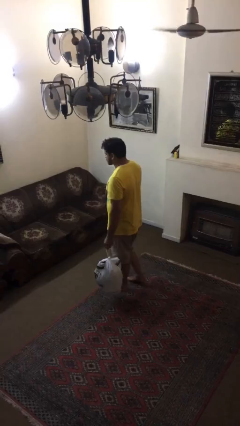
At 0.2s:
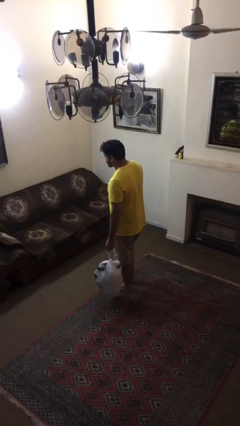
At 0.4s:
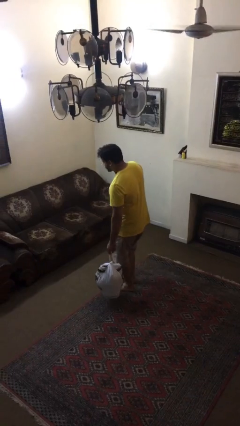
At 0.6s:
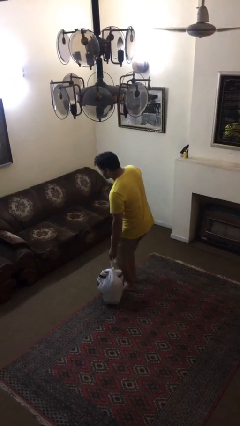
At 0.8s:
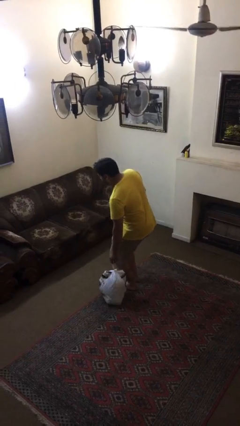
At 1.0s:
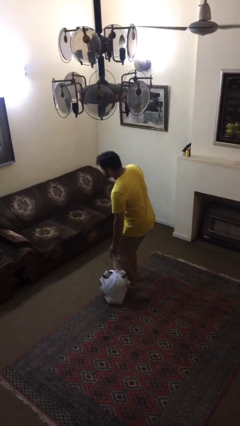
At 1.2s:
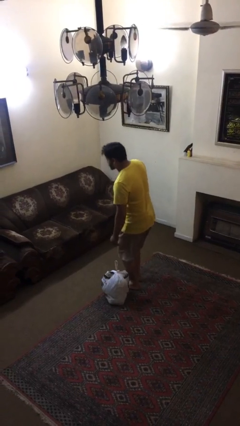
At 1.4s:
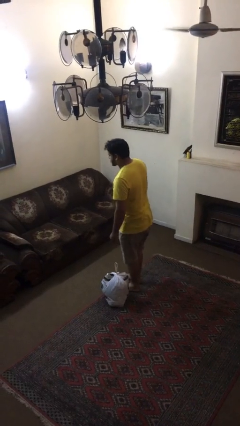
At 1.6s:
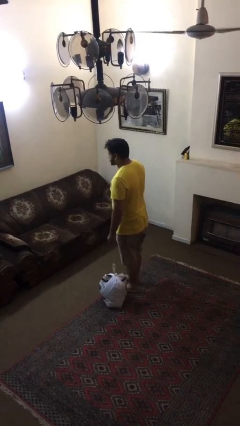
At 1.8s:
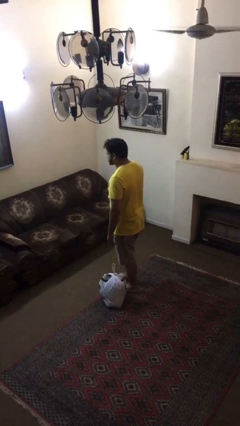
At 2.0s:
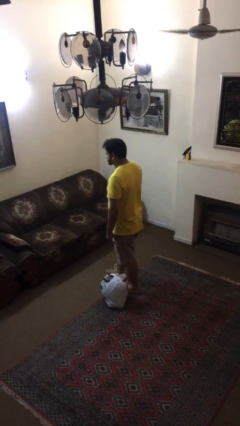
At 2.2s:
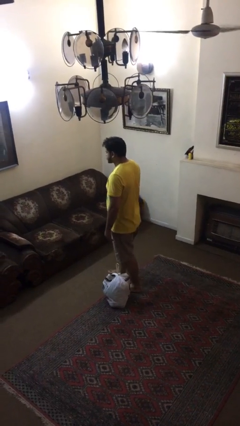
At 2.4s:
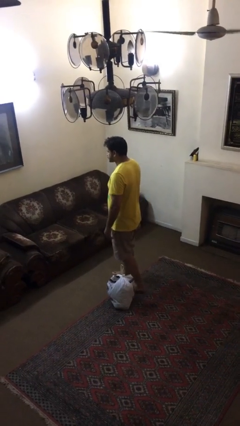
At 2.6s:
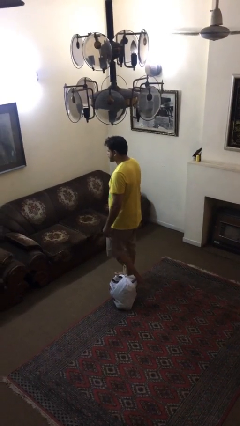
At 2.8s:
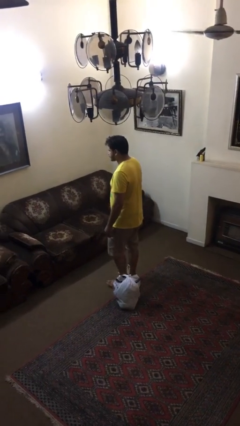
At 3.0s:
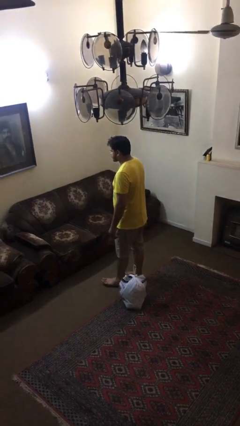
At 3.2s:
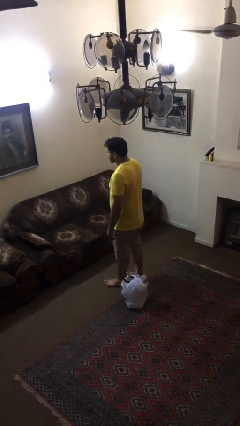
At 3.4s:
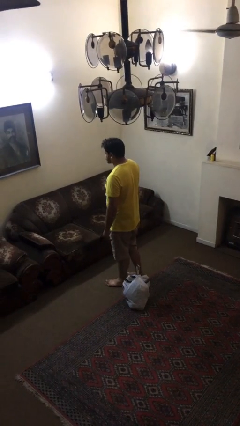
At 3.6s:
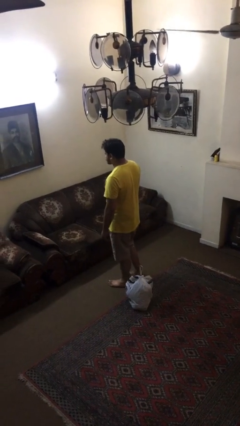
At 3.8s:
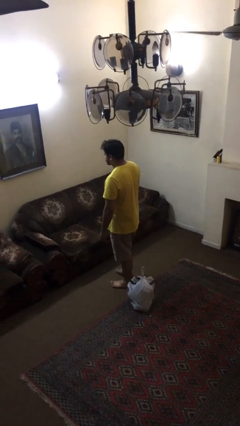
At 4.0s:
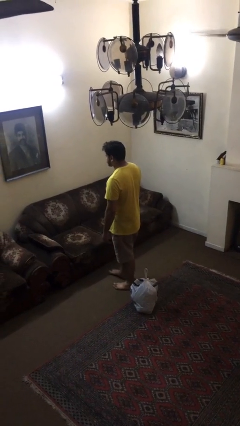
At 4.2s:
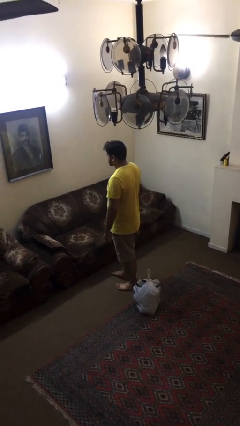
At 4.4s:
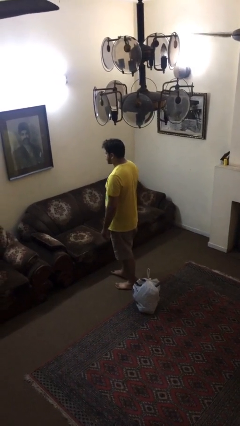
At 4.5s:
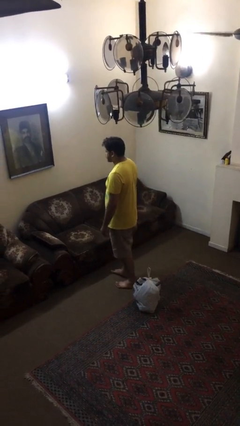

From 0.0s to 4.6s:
person puts down object on floor

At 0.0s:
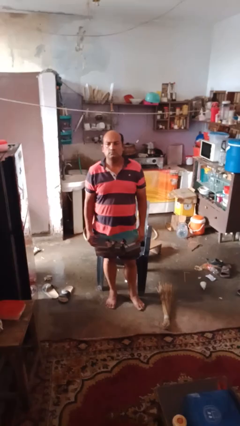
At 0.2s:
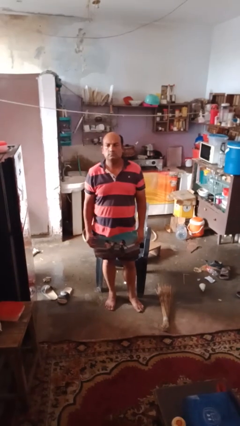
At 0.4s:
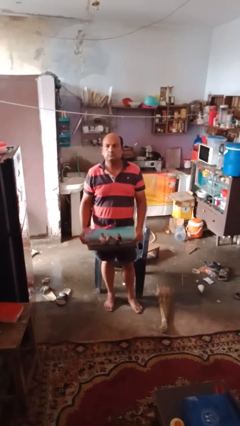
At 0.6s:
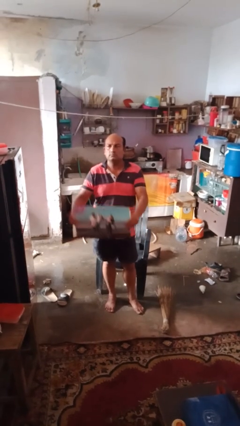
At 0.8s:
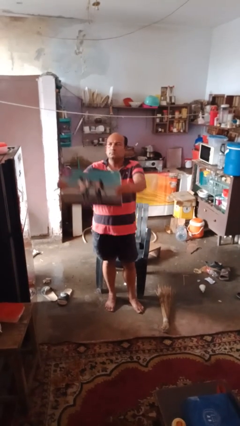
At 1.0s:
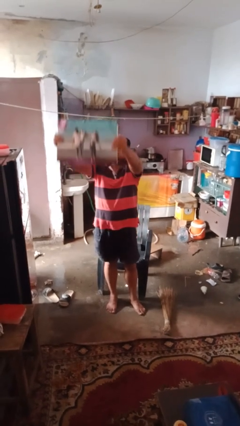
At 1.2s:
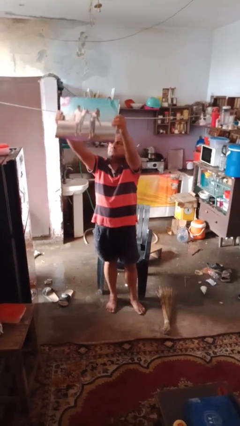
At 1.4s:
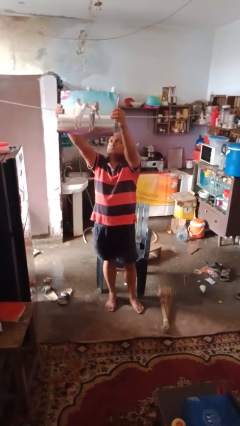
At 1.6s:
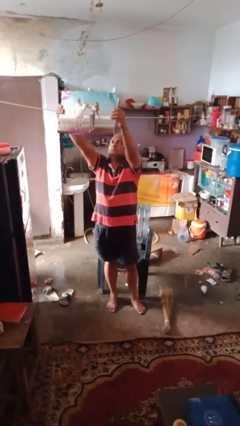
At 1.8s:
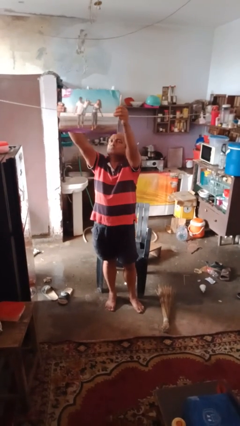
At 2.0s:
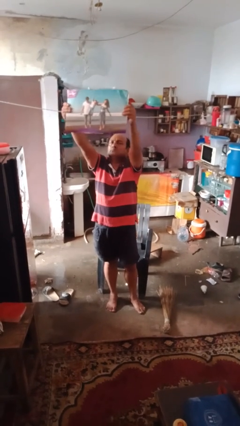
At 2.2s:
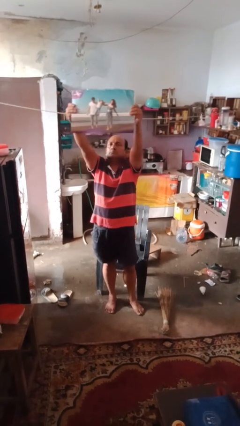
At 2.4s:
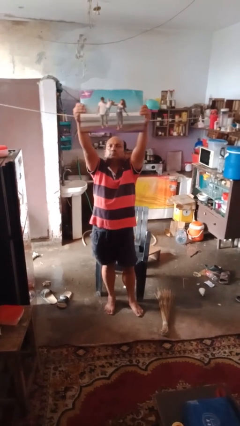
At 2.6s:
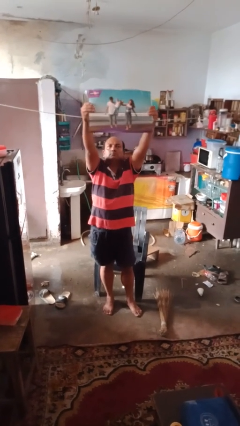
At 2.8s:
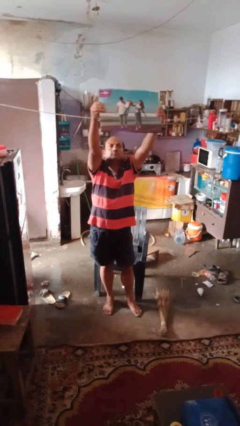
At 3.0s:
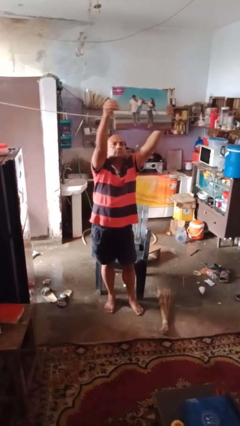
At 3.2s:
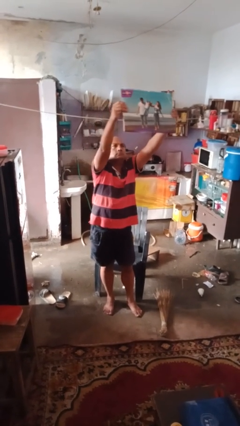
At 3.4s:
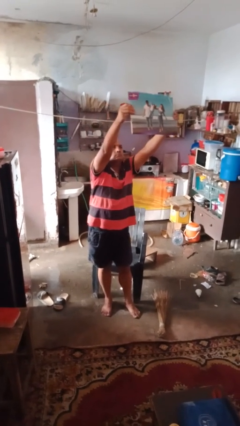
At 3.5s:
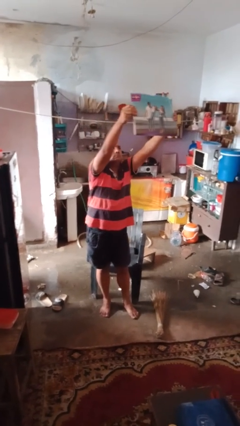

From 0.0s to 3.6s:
person holds object above head

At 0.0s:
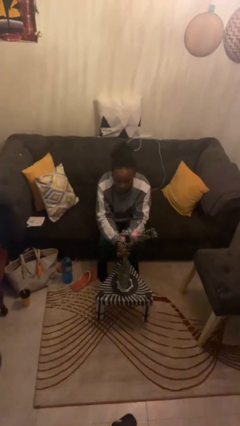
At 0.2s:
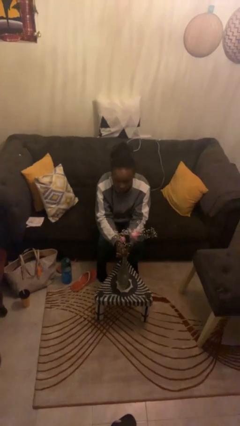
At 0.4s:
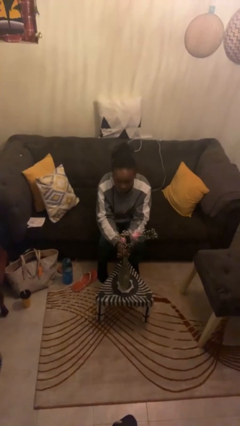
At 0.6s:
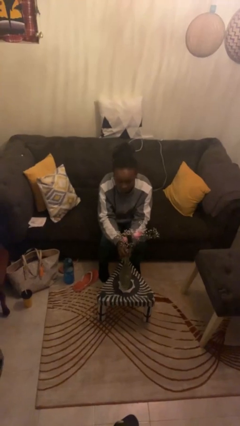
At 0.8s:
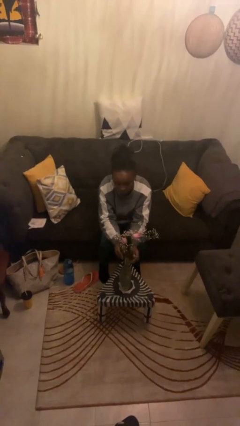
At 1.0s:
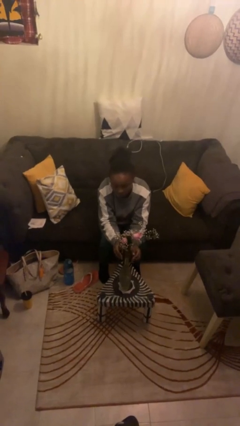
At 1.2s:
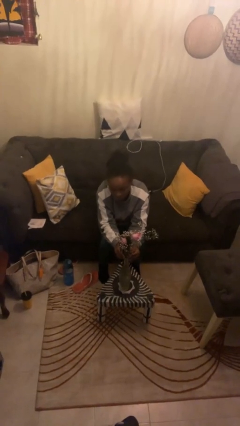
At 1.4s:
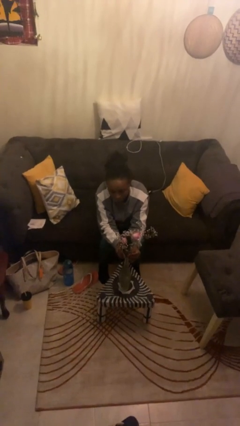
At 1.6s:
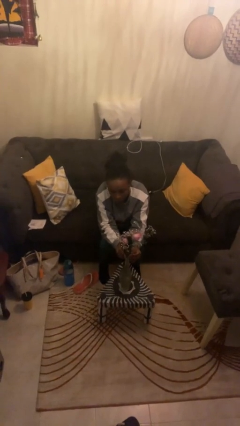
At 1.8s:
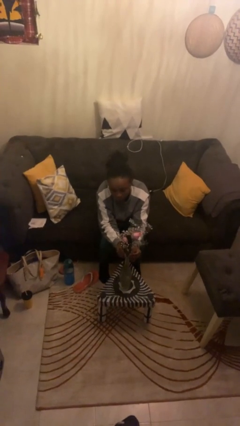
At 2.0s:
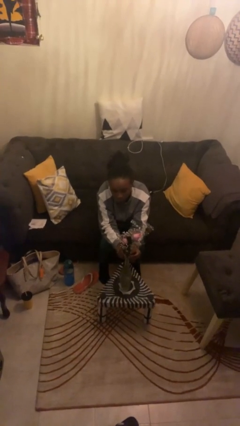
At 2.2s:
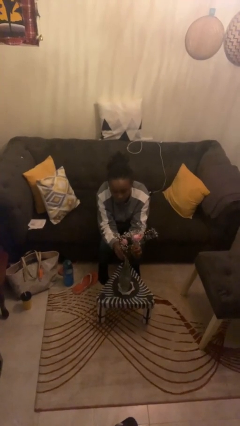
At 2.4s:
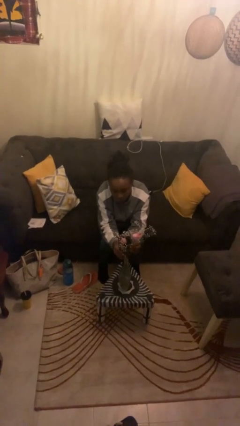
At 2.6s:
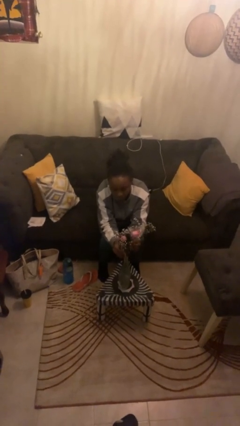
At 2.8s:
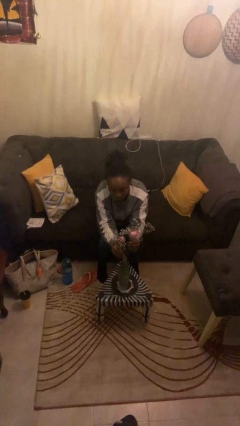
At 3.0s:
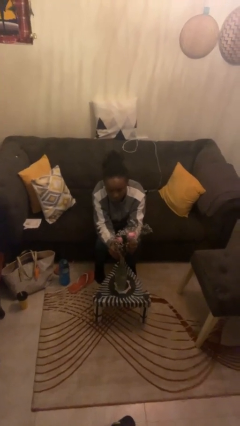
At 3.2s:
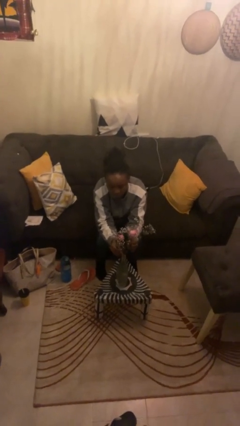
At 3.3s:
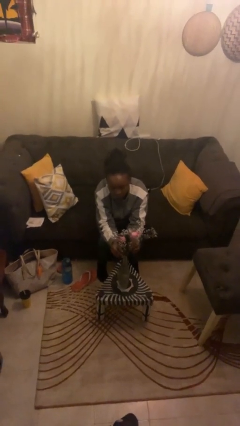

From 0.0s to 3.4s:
person arranges flowers in vase

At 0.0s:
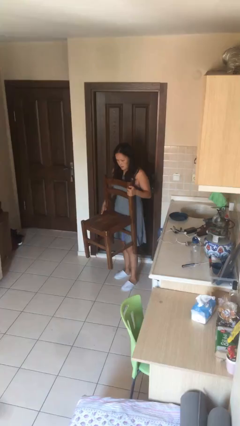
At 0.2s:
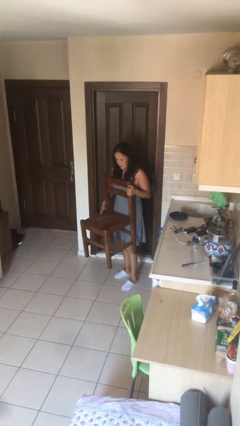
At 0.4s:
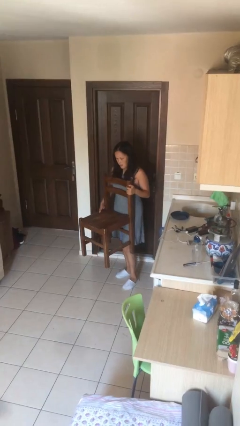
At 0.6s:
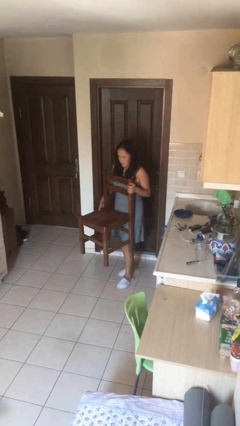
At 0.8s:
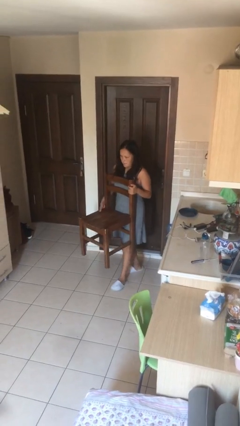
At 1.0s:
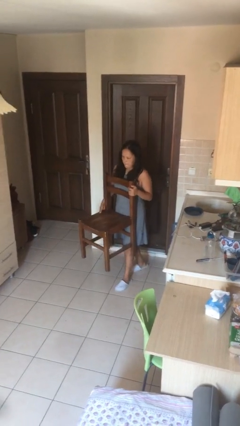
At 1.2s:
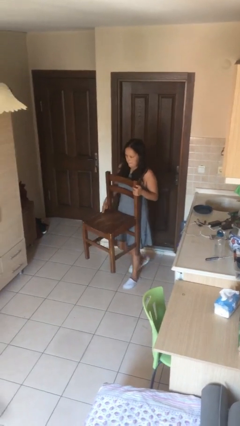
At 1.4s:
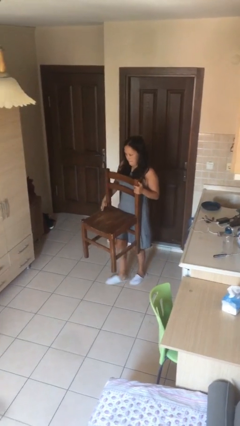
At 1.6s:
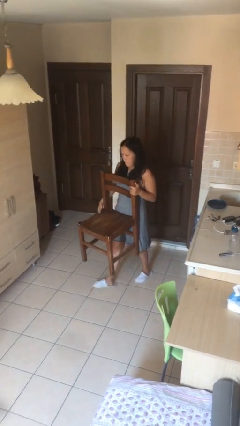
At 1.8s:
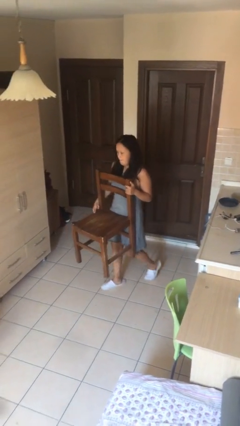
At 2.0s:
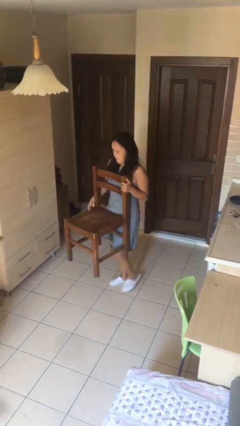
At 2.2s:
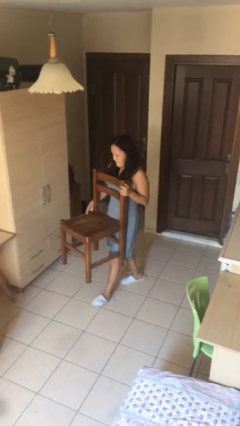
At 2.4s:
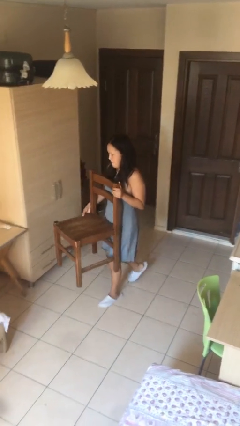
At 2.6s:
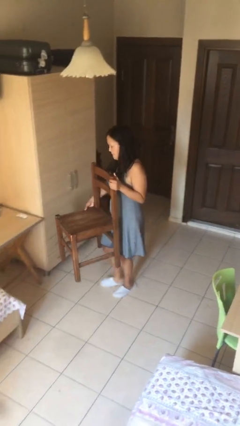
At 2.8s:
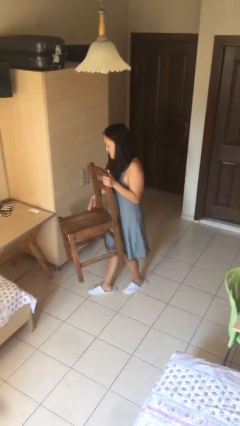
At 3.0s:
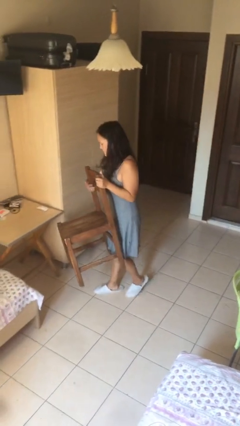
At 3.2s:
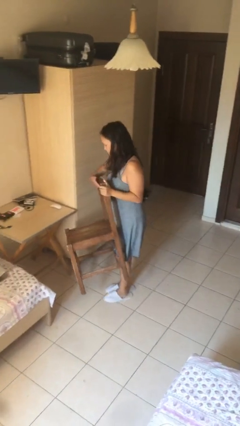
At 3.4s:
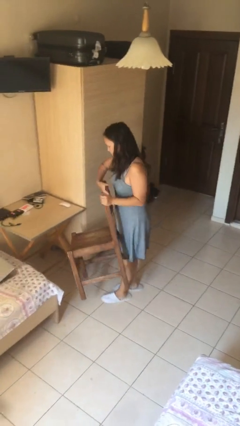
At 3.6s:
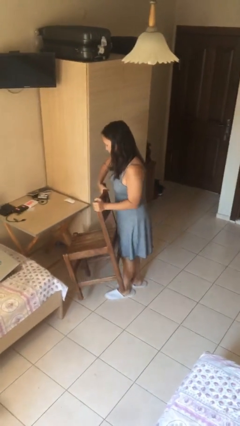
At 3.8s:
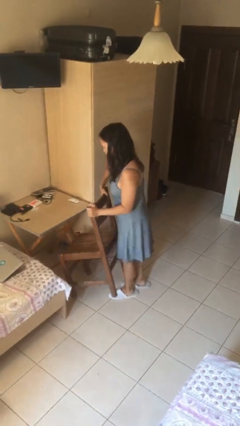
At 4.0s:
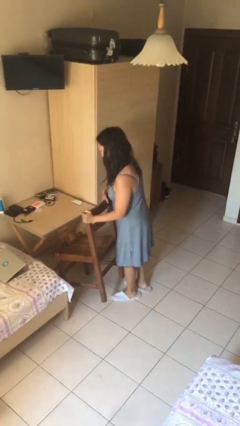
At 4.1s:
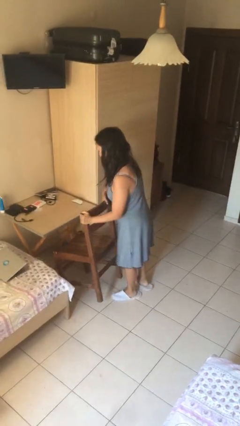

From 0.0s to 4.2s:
person carries heavy object

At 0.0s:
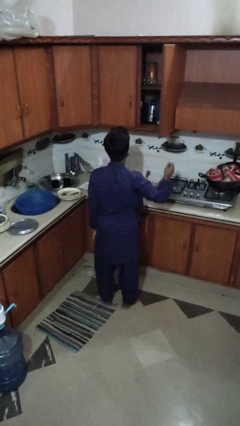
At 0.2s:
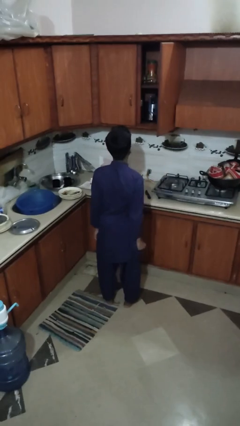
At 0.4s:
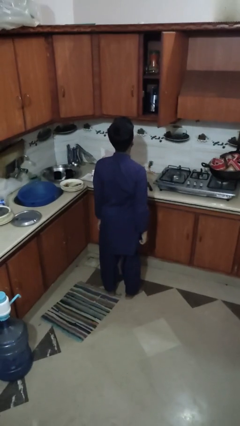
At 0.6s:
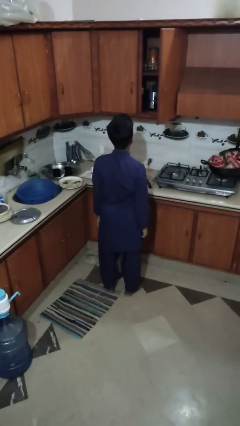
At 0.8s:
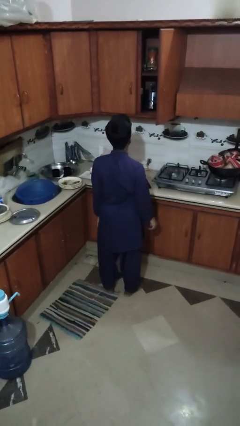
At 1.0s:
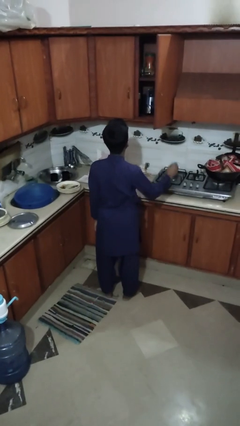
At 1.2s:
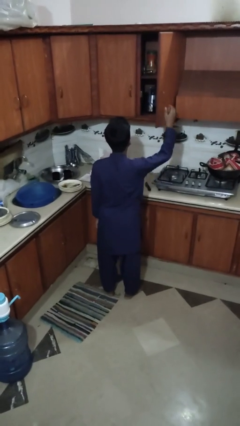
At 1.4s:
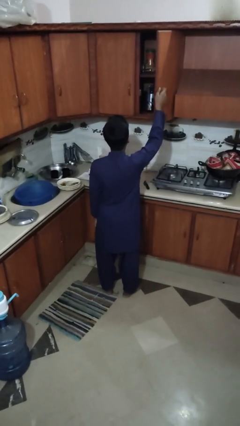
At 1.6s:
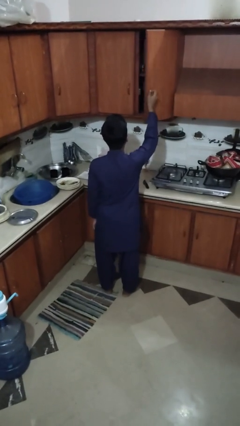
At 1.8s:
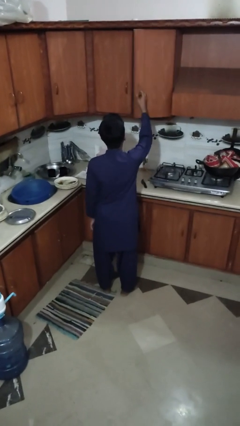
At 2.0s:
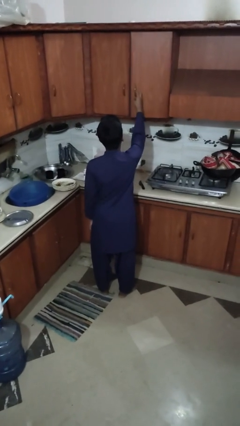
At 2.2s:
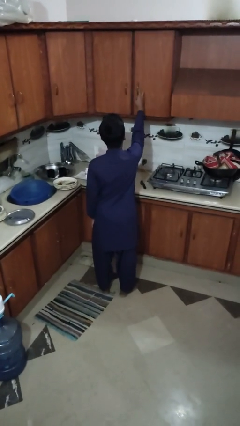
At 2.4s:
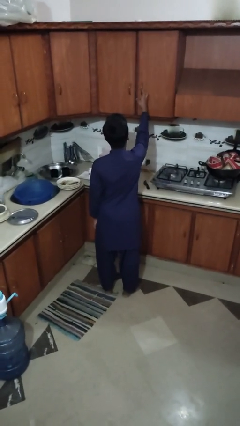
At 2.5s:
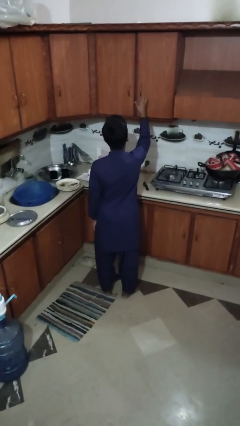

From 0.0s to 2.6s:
person closes cabinet
